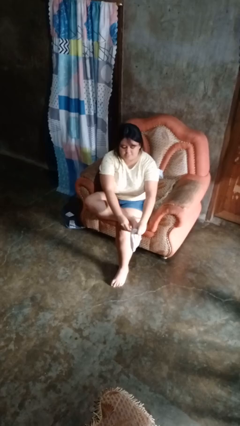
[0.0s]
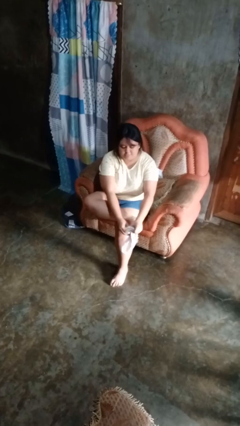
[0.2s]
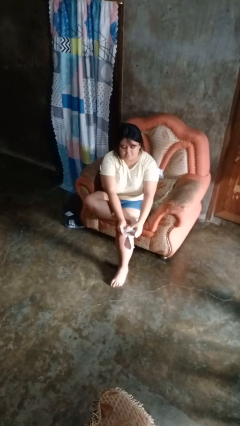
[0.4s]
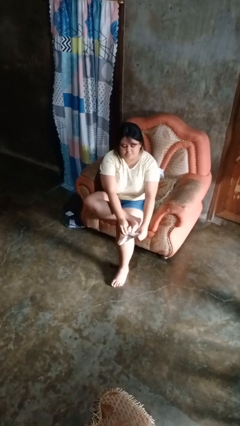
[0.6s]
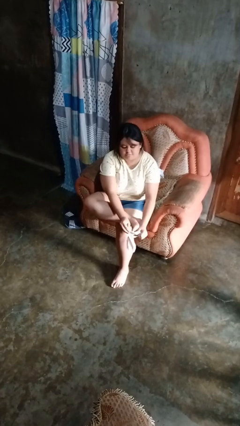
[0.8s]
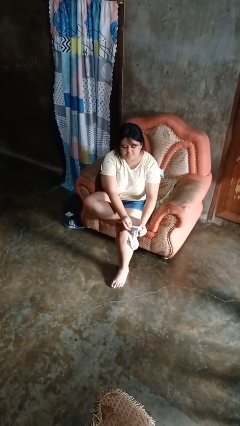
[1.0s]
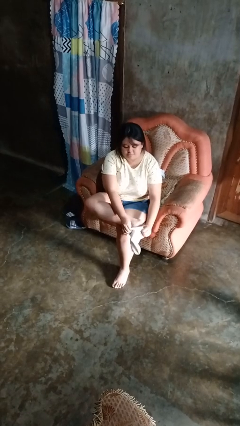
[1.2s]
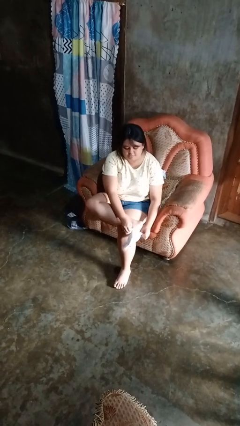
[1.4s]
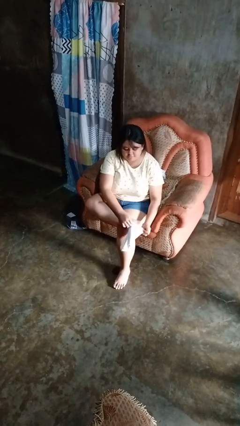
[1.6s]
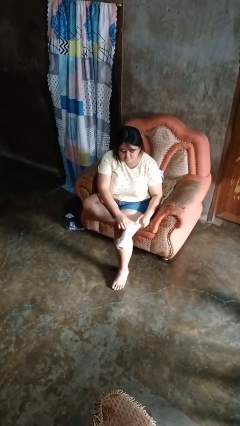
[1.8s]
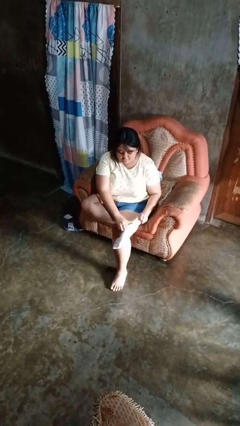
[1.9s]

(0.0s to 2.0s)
person puts on socks

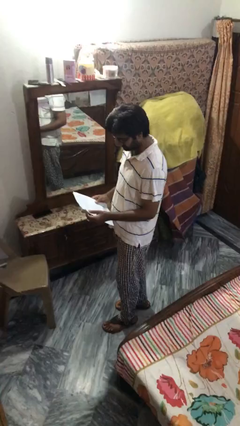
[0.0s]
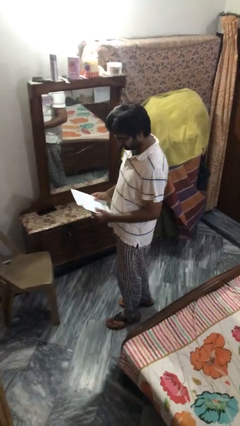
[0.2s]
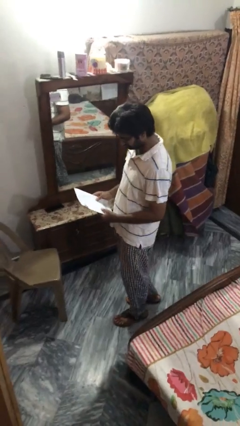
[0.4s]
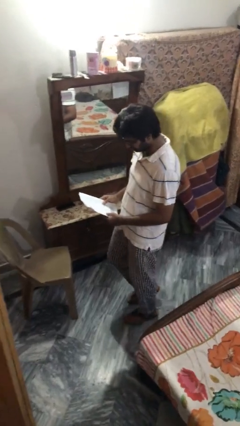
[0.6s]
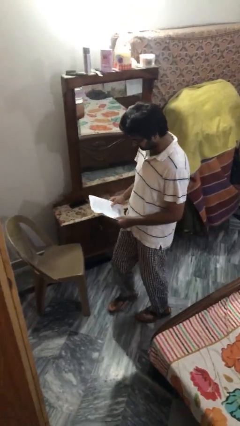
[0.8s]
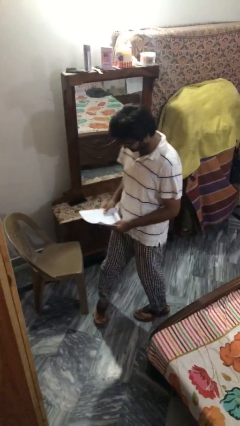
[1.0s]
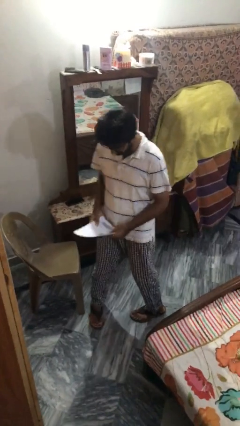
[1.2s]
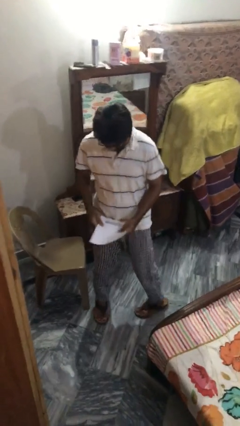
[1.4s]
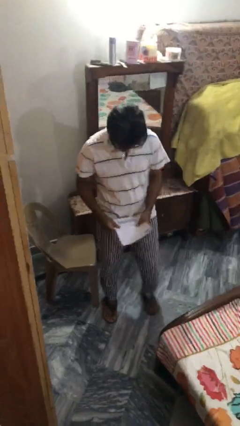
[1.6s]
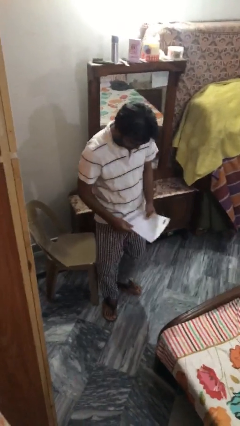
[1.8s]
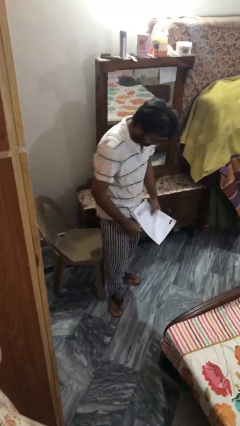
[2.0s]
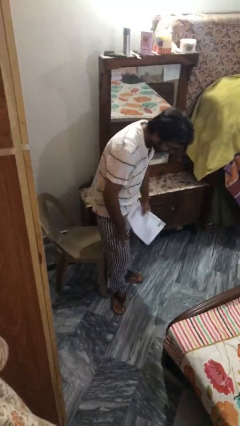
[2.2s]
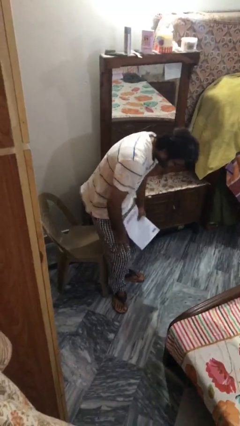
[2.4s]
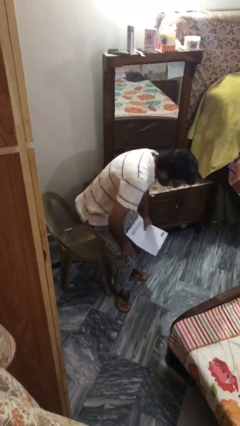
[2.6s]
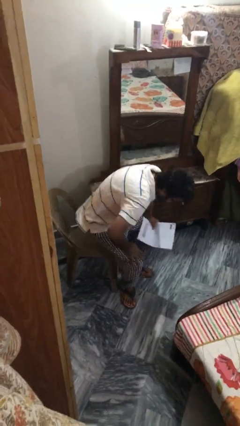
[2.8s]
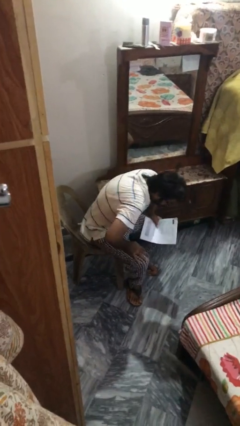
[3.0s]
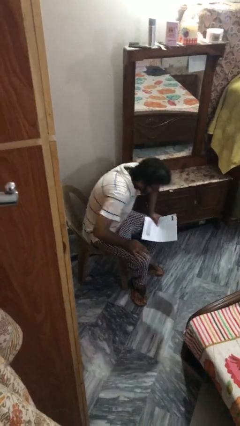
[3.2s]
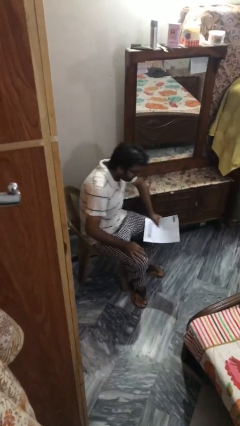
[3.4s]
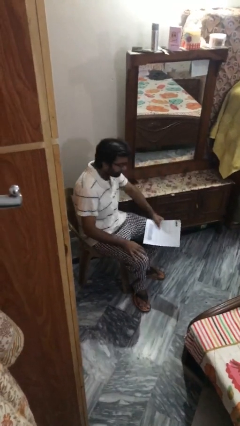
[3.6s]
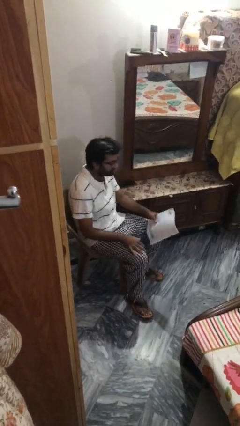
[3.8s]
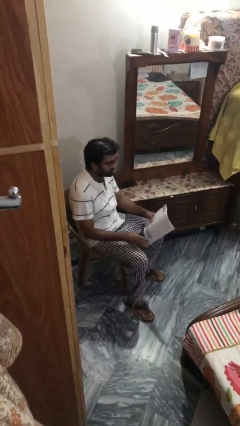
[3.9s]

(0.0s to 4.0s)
person sits down

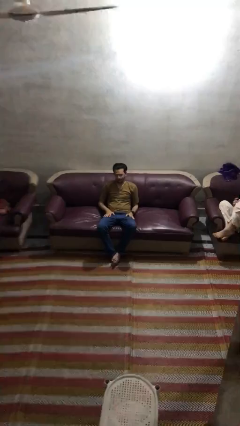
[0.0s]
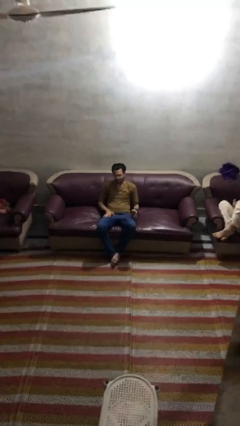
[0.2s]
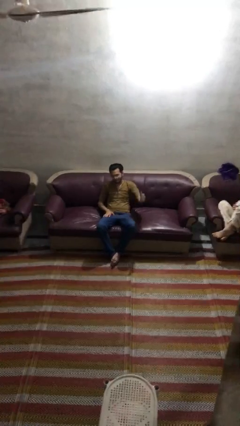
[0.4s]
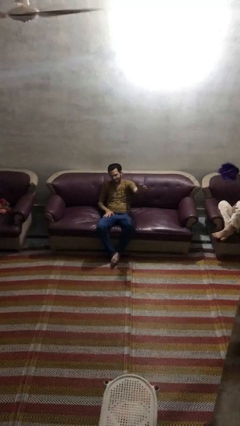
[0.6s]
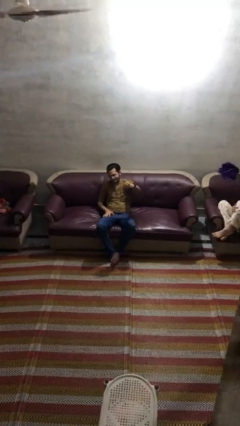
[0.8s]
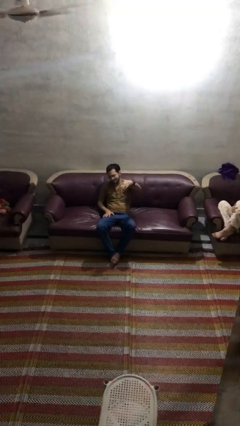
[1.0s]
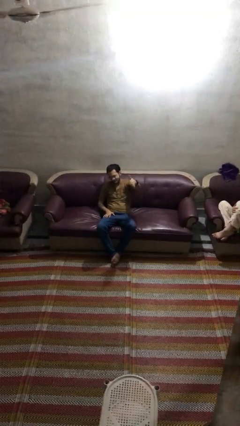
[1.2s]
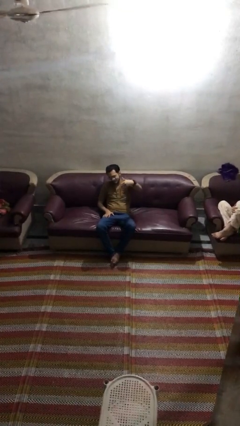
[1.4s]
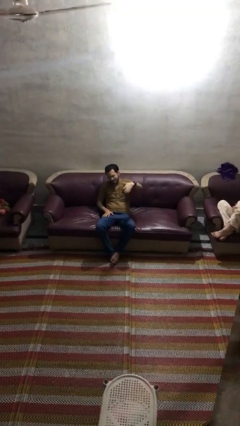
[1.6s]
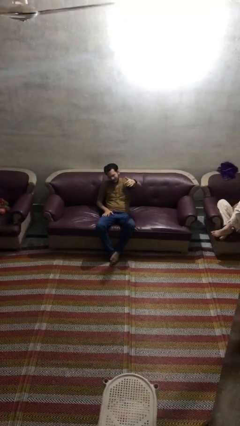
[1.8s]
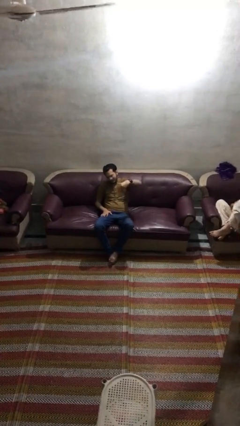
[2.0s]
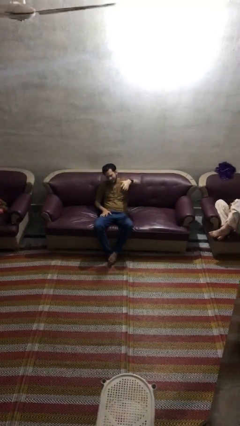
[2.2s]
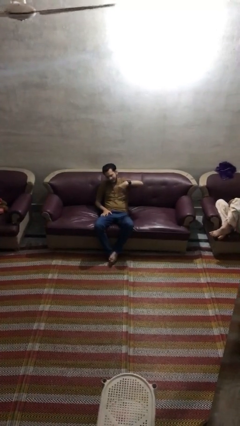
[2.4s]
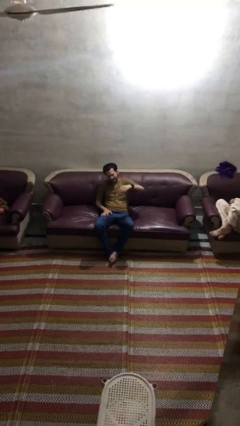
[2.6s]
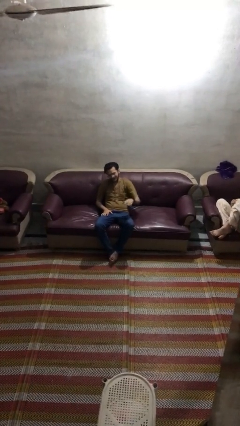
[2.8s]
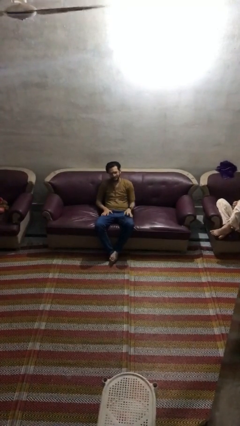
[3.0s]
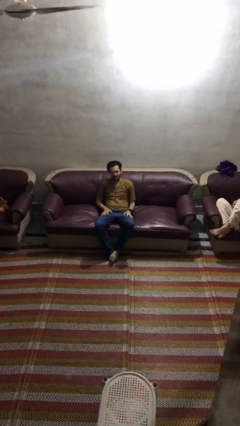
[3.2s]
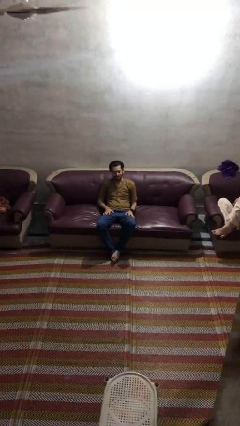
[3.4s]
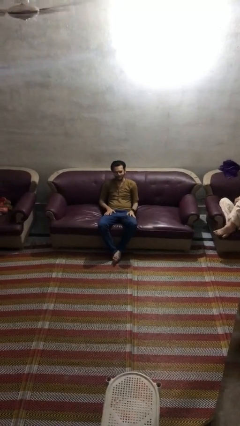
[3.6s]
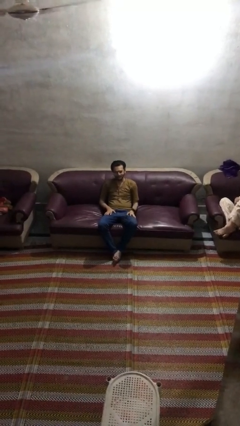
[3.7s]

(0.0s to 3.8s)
person gestures come here

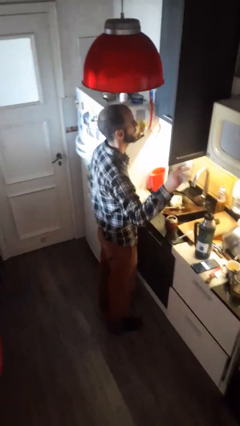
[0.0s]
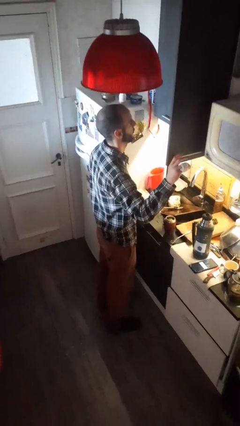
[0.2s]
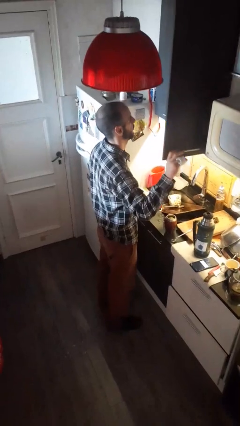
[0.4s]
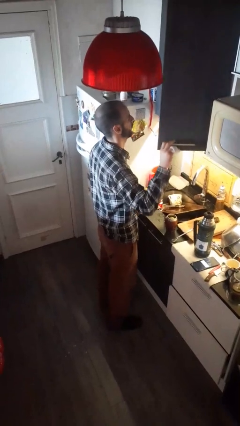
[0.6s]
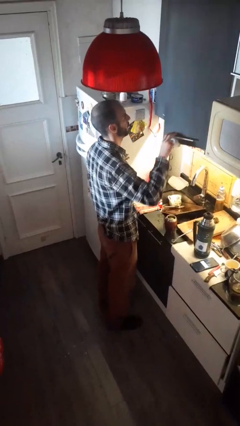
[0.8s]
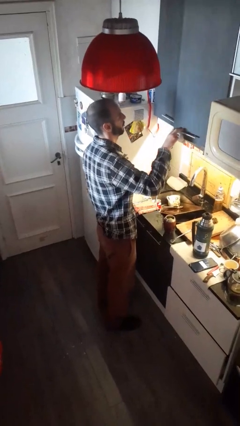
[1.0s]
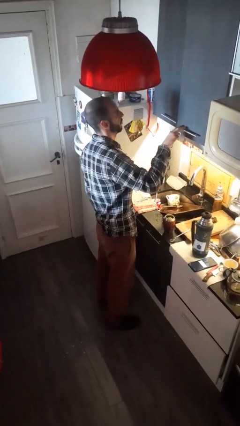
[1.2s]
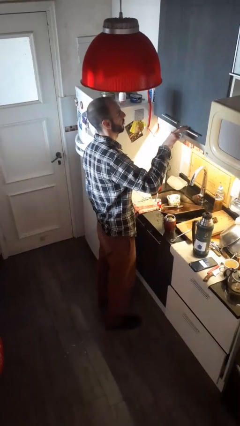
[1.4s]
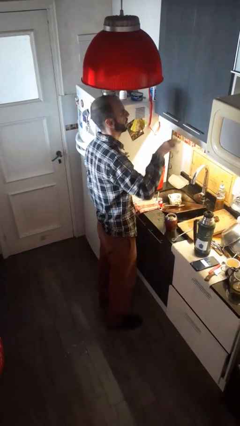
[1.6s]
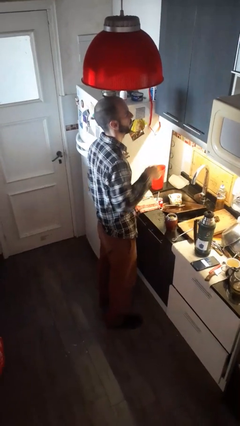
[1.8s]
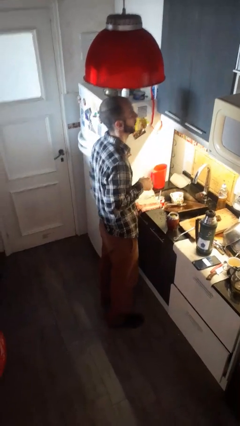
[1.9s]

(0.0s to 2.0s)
person closes kitchen drawer

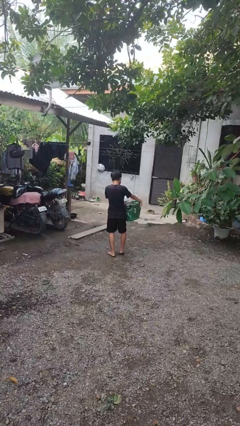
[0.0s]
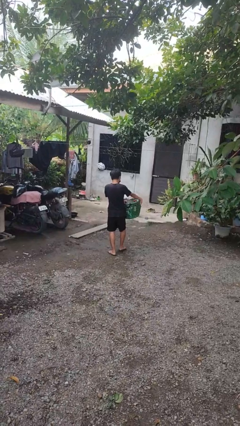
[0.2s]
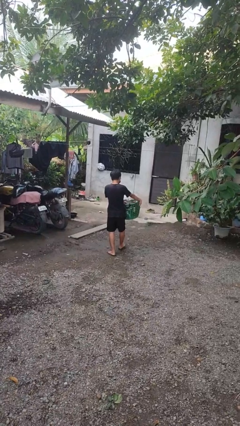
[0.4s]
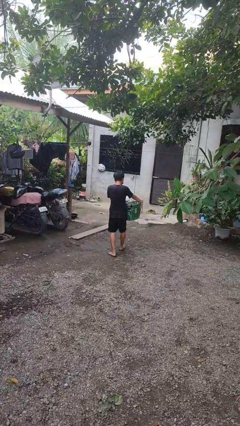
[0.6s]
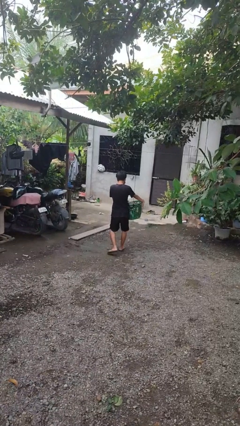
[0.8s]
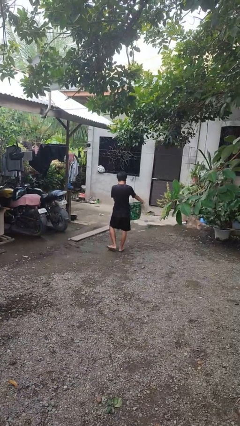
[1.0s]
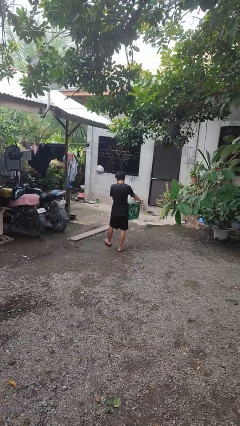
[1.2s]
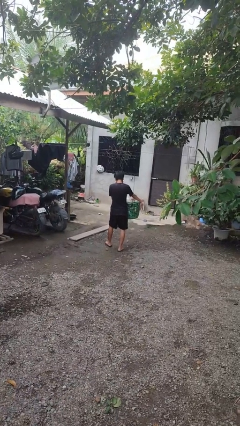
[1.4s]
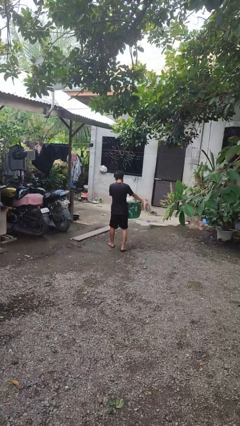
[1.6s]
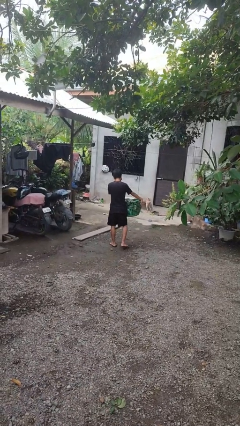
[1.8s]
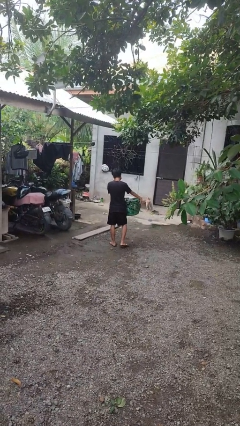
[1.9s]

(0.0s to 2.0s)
person carries laundry basket

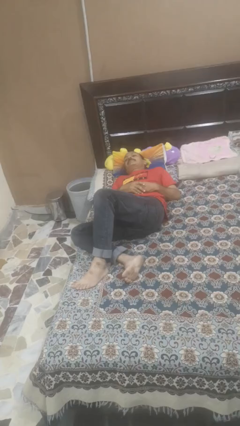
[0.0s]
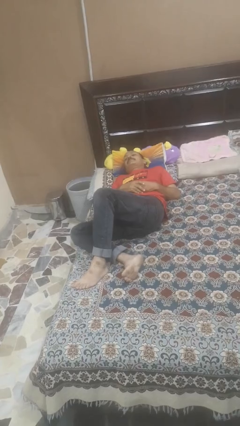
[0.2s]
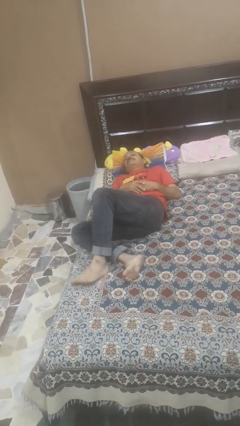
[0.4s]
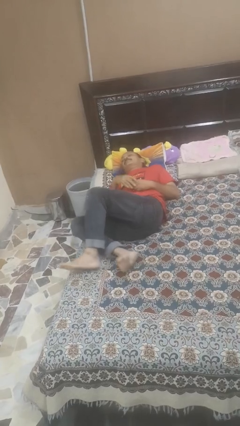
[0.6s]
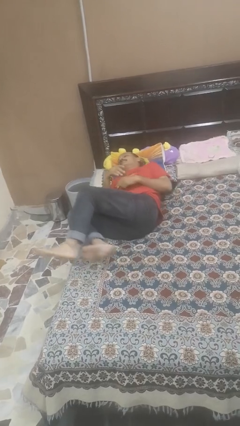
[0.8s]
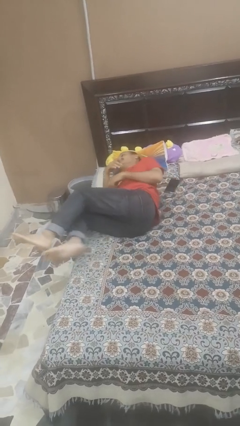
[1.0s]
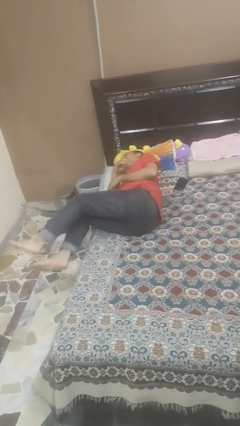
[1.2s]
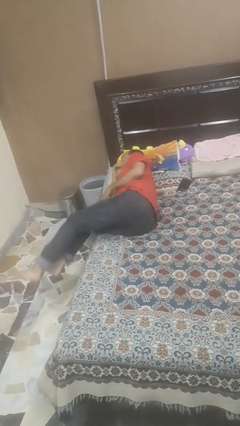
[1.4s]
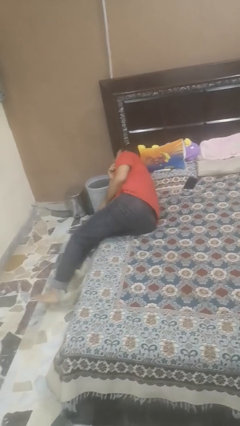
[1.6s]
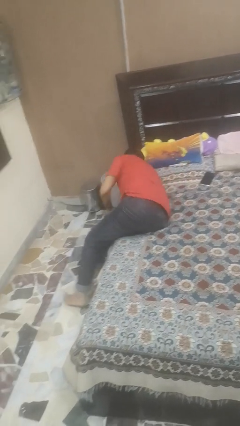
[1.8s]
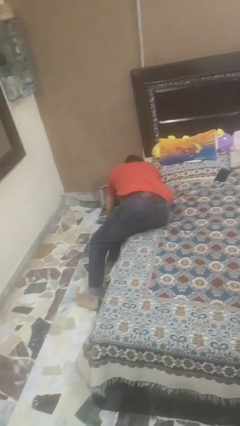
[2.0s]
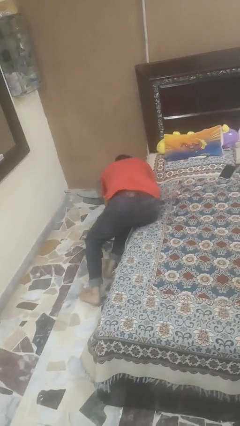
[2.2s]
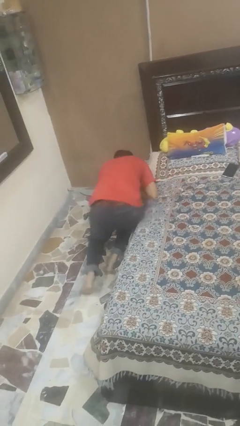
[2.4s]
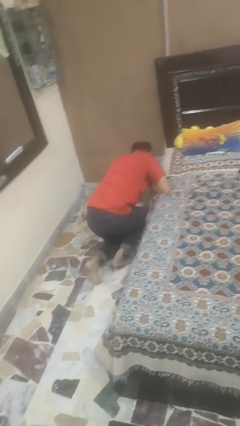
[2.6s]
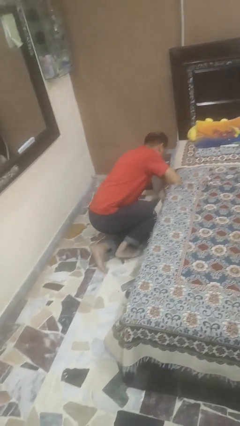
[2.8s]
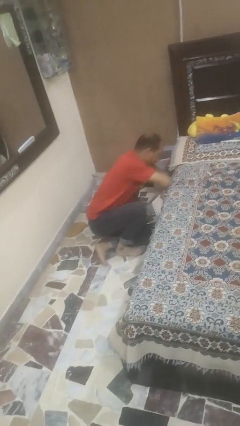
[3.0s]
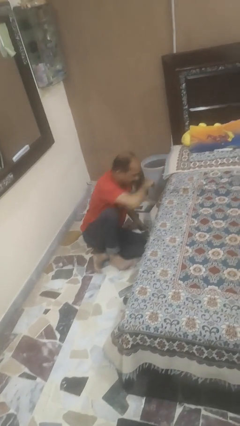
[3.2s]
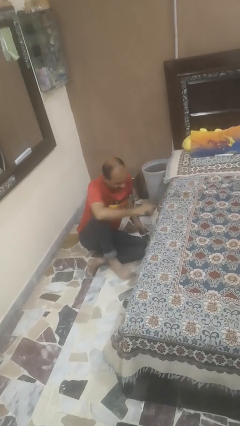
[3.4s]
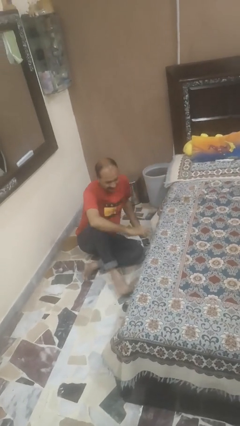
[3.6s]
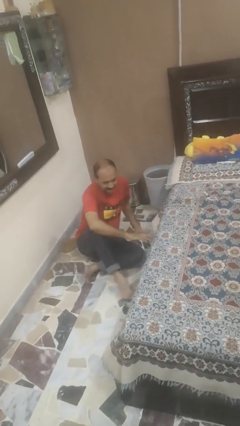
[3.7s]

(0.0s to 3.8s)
person falls from bed
